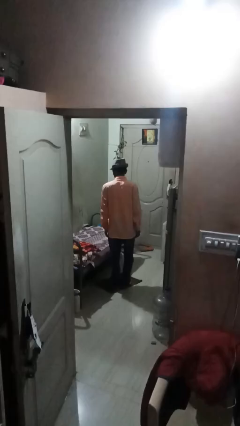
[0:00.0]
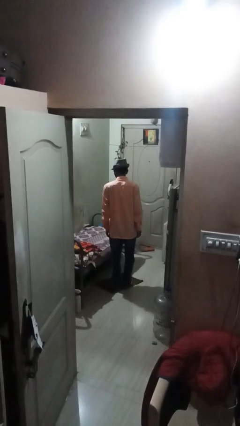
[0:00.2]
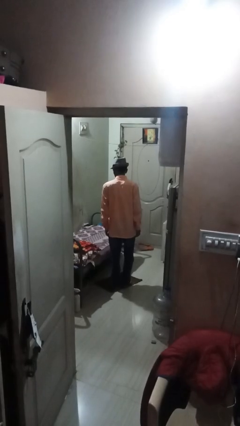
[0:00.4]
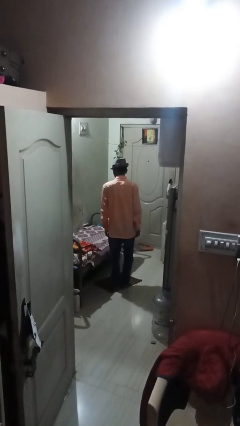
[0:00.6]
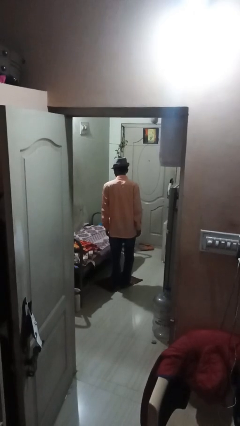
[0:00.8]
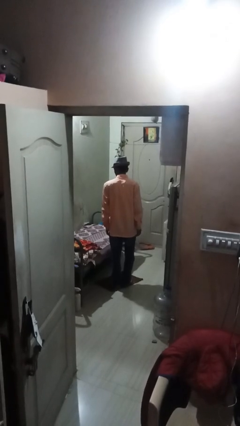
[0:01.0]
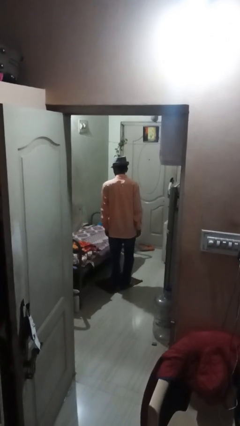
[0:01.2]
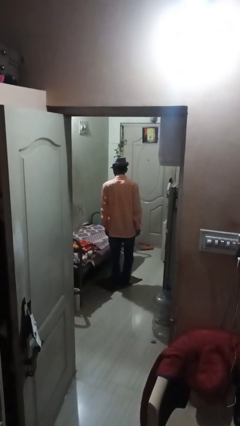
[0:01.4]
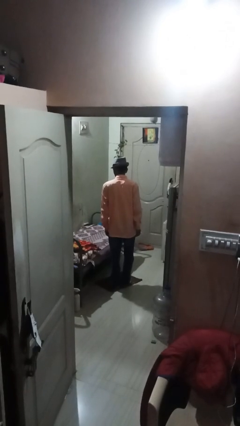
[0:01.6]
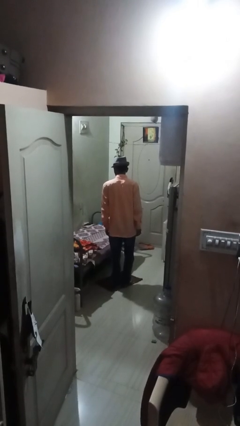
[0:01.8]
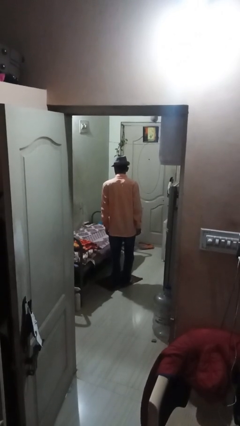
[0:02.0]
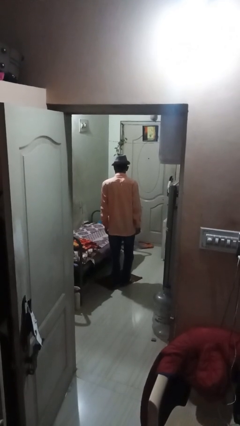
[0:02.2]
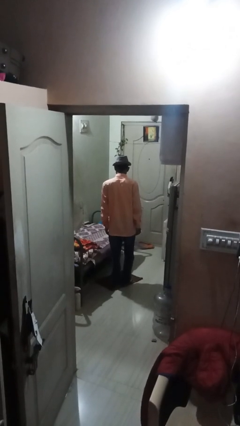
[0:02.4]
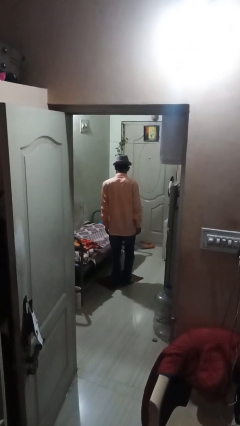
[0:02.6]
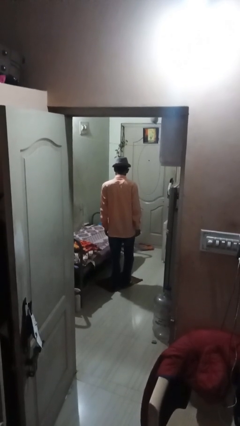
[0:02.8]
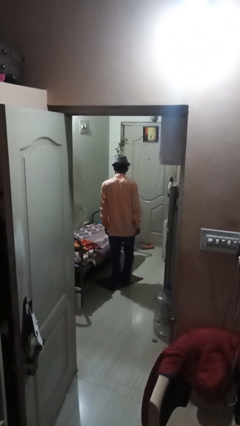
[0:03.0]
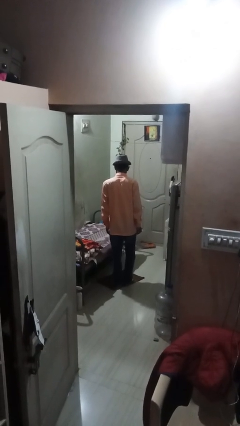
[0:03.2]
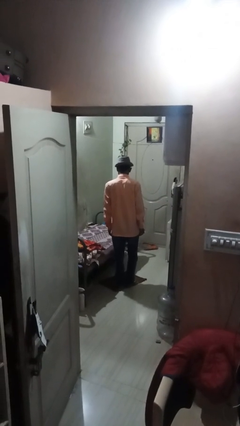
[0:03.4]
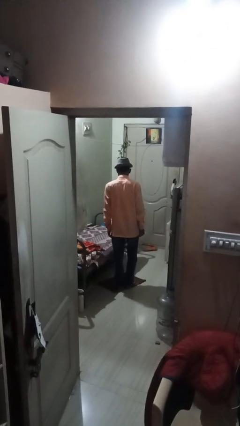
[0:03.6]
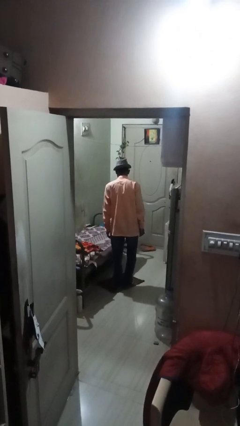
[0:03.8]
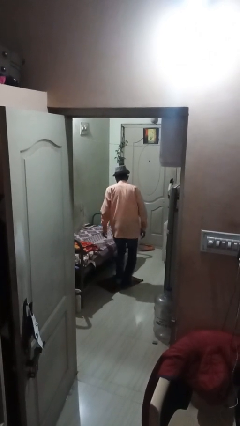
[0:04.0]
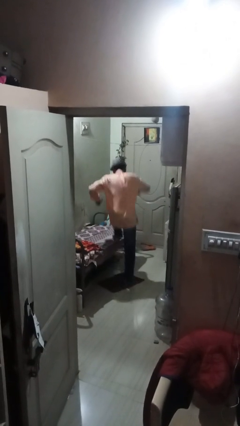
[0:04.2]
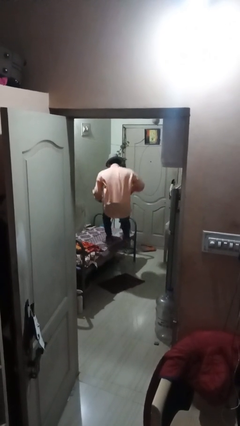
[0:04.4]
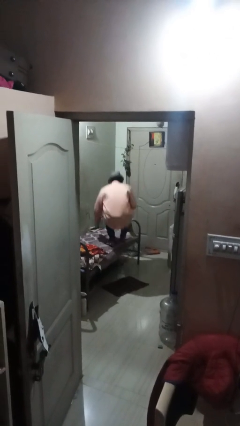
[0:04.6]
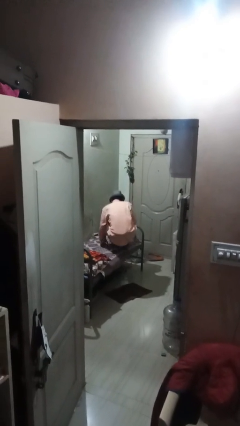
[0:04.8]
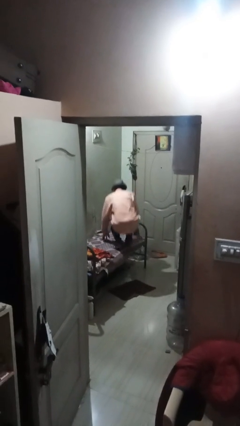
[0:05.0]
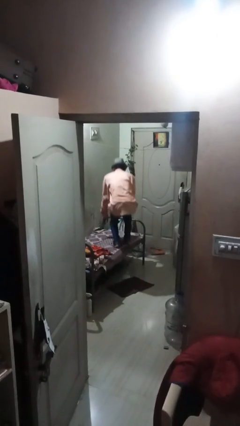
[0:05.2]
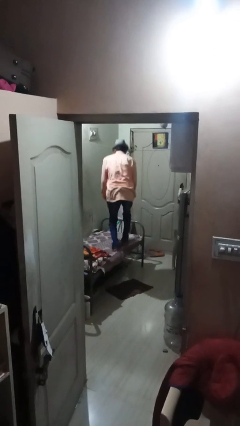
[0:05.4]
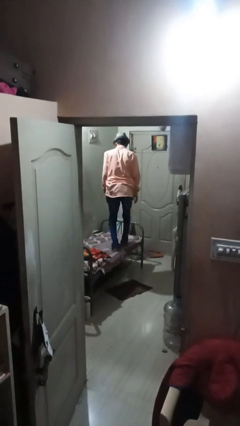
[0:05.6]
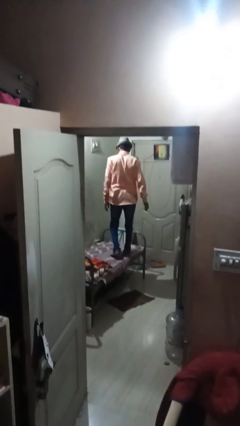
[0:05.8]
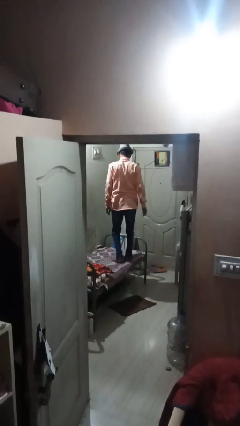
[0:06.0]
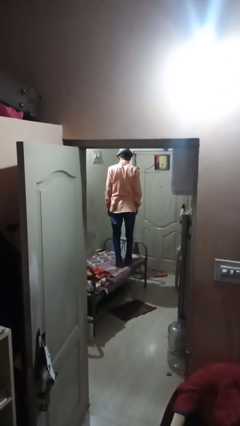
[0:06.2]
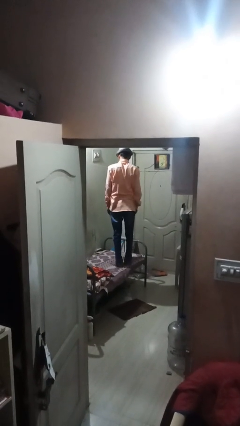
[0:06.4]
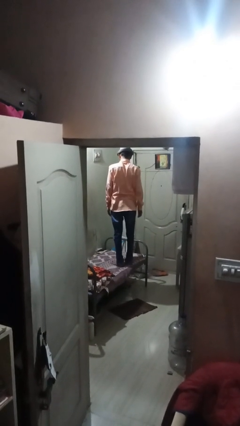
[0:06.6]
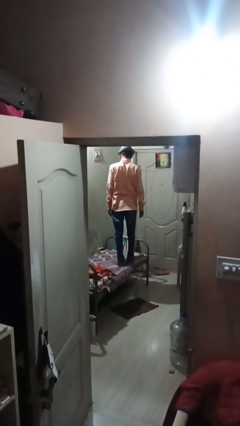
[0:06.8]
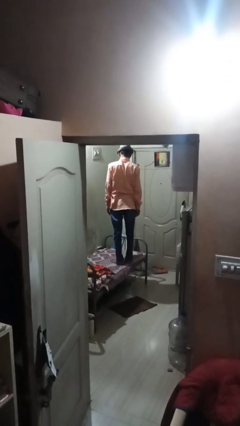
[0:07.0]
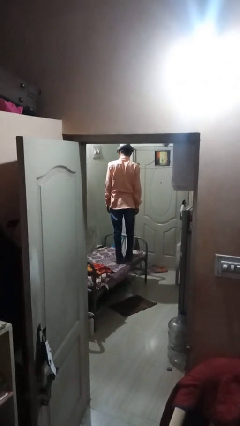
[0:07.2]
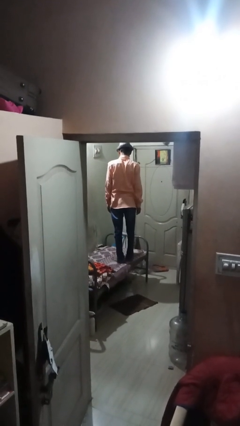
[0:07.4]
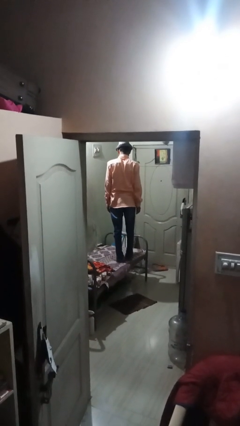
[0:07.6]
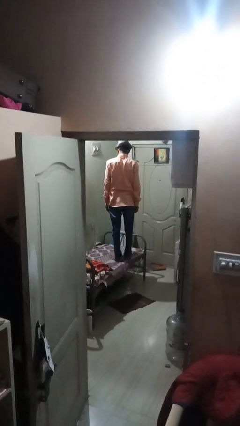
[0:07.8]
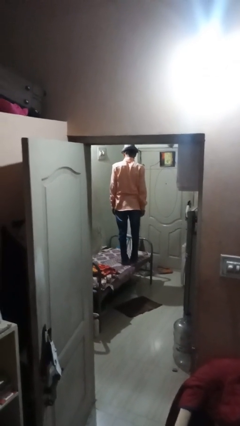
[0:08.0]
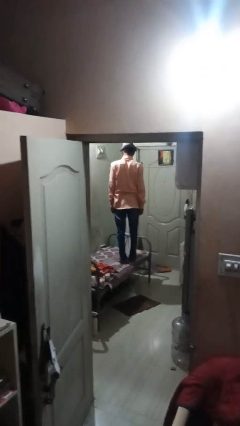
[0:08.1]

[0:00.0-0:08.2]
person jumps on bed

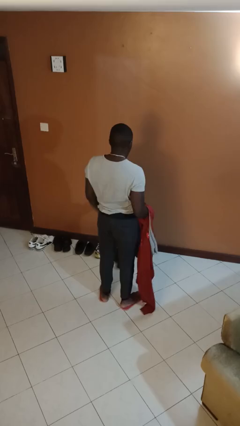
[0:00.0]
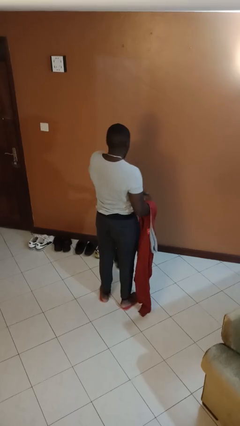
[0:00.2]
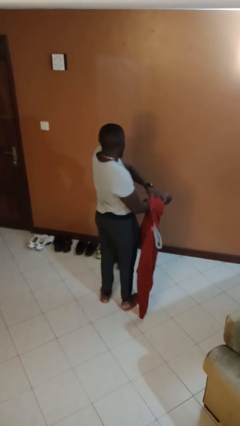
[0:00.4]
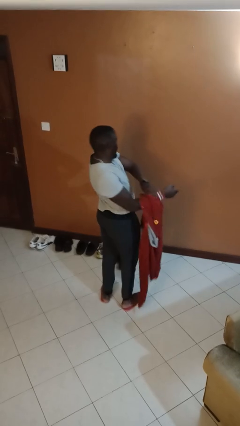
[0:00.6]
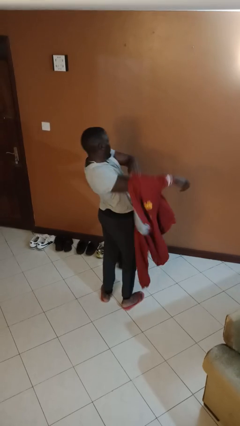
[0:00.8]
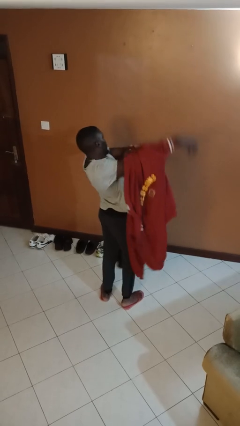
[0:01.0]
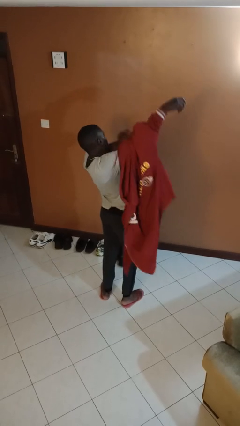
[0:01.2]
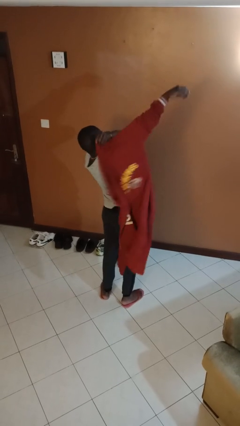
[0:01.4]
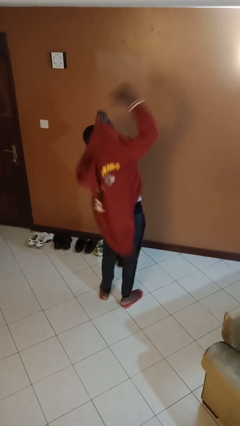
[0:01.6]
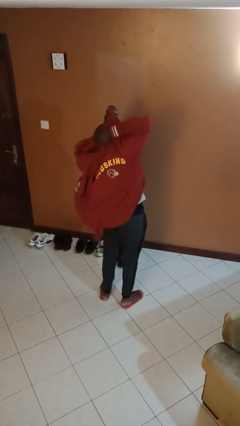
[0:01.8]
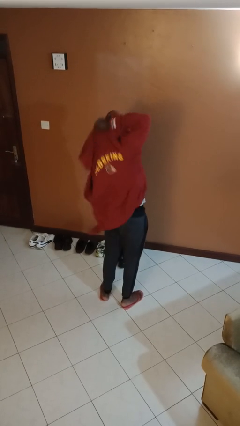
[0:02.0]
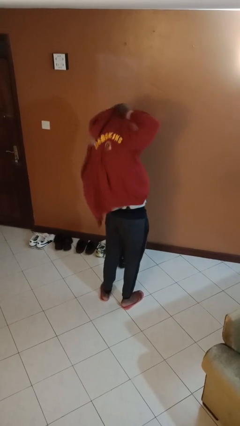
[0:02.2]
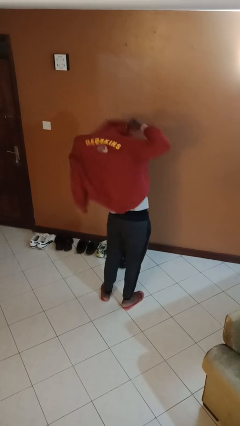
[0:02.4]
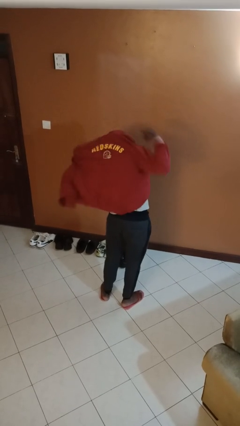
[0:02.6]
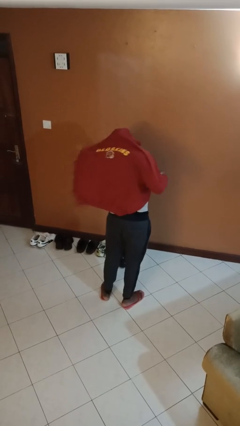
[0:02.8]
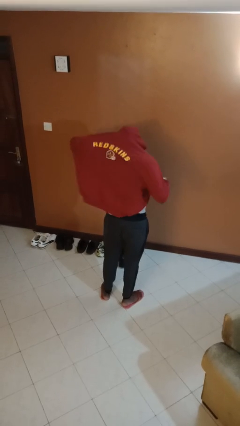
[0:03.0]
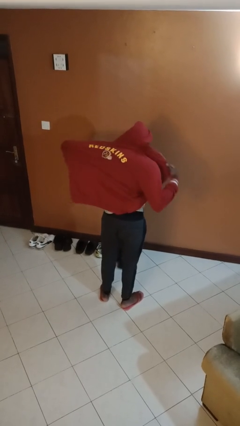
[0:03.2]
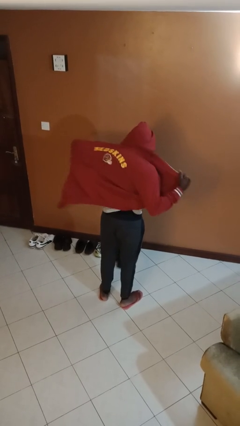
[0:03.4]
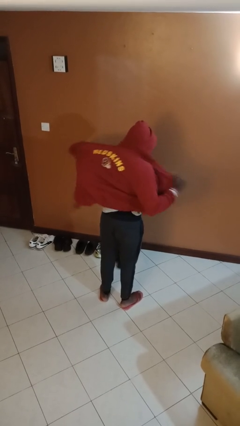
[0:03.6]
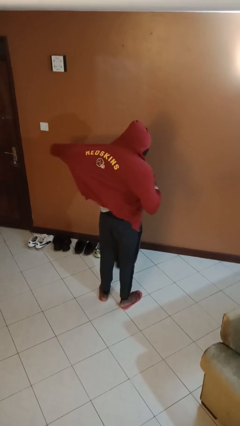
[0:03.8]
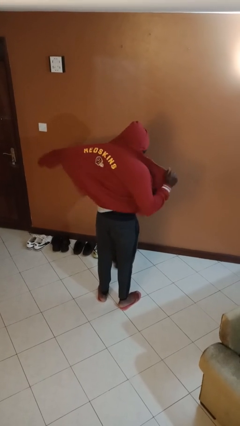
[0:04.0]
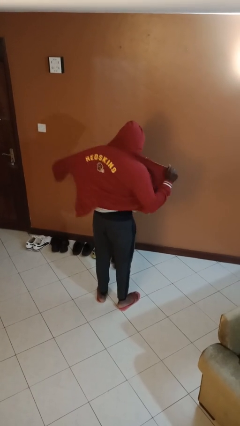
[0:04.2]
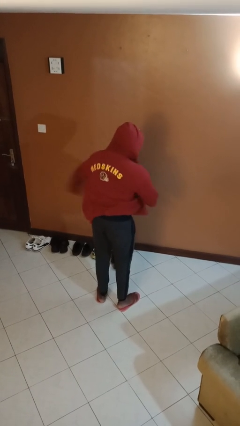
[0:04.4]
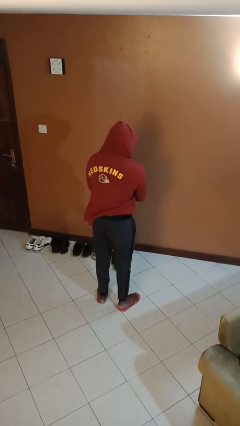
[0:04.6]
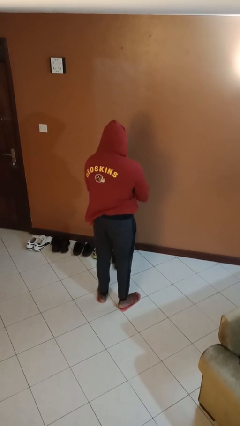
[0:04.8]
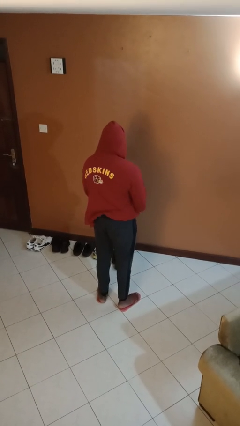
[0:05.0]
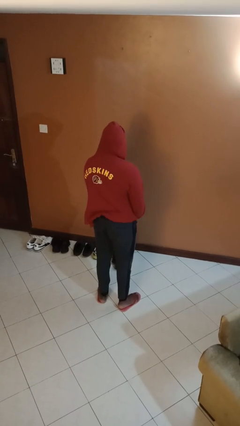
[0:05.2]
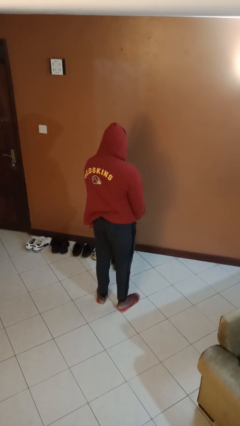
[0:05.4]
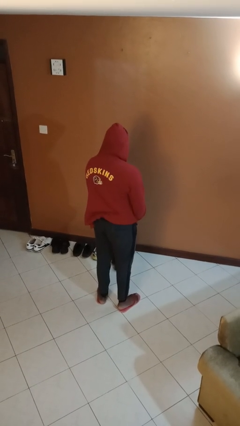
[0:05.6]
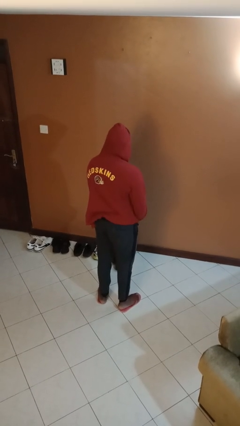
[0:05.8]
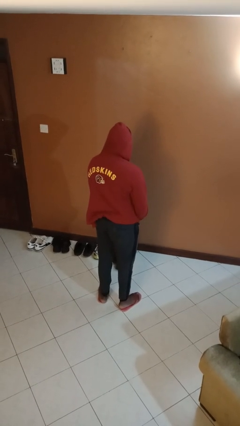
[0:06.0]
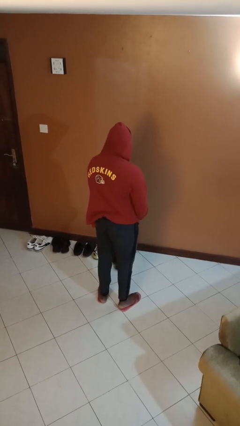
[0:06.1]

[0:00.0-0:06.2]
person puts on hoodie

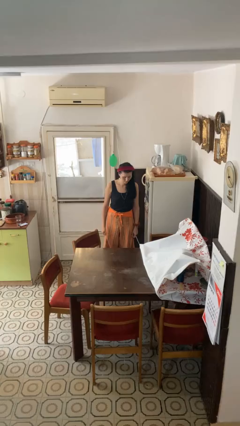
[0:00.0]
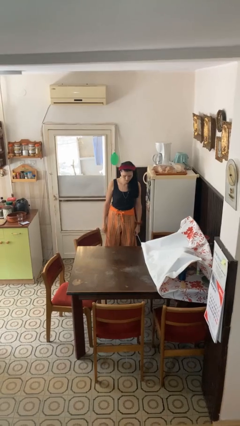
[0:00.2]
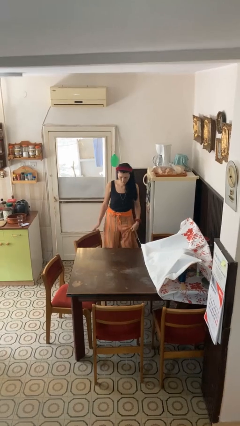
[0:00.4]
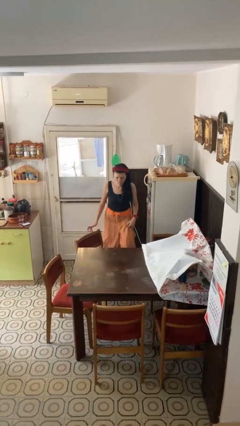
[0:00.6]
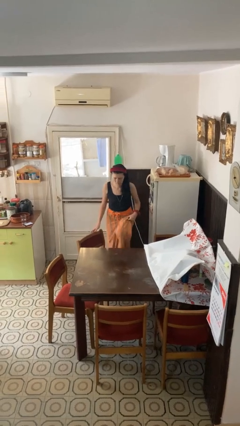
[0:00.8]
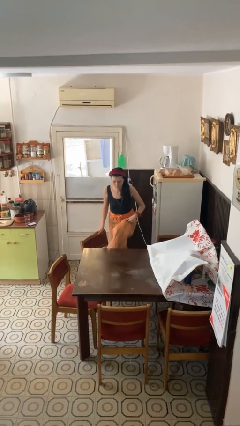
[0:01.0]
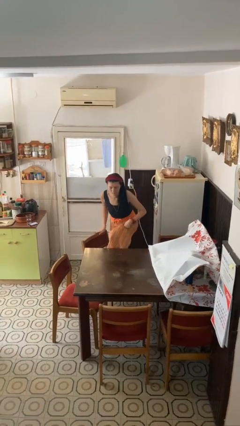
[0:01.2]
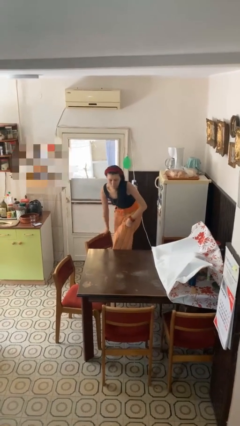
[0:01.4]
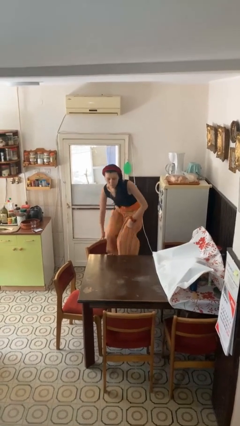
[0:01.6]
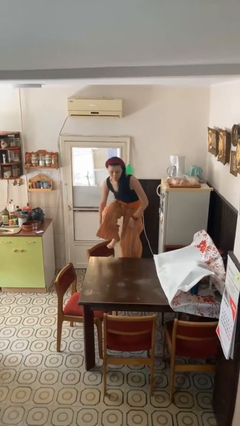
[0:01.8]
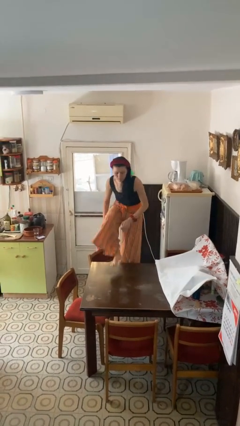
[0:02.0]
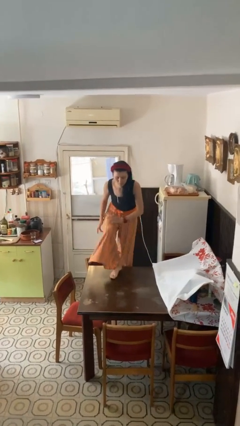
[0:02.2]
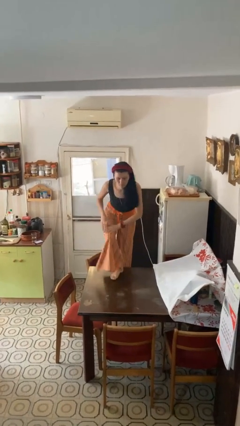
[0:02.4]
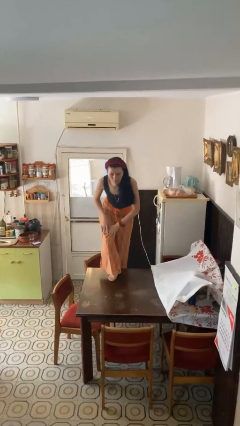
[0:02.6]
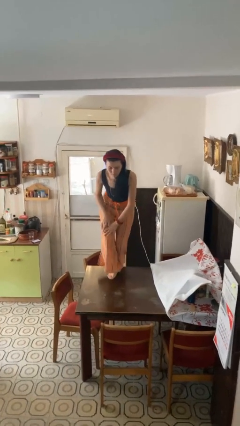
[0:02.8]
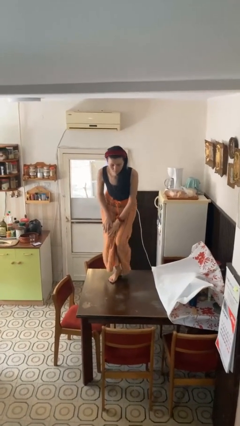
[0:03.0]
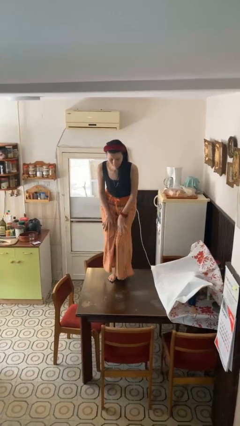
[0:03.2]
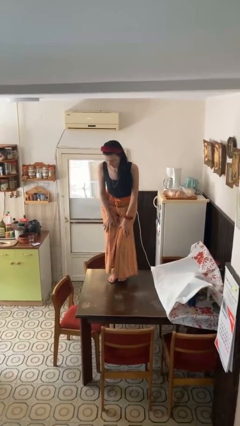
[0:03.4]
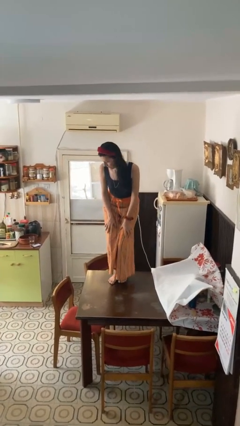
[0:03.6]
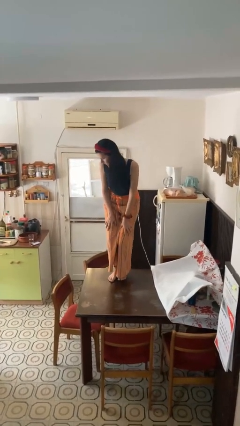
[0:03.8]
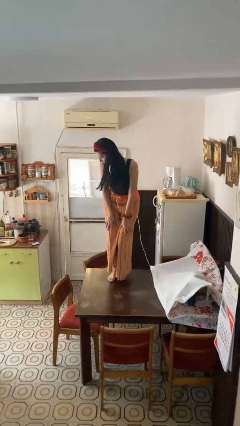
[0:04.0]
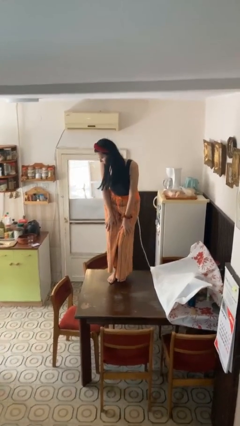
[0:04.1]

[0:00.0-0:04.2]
person climbs on table
